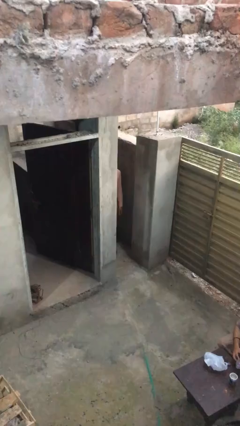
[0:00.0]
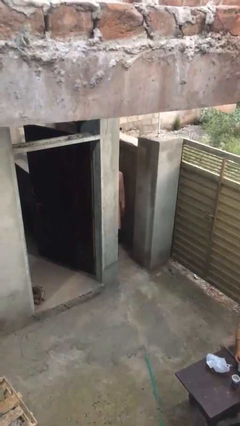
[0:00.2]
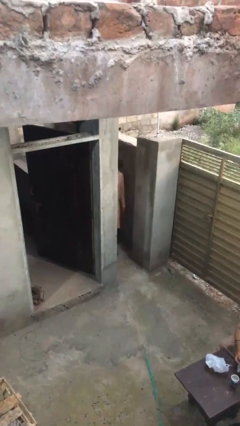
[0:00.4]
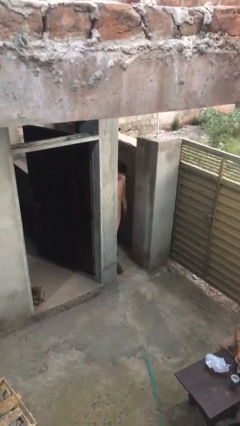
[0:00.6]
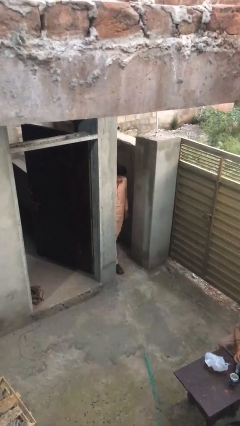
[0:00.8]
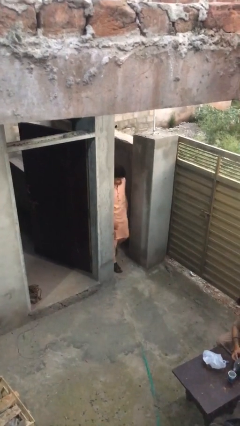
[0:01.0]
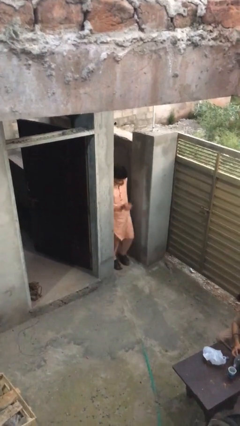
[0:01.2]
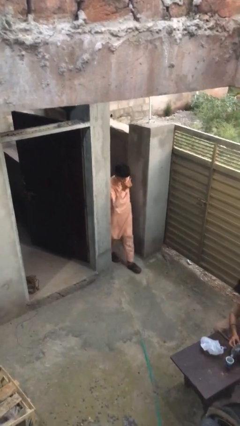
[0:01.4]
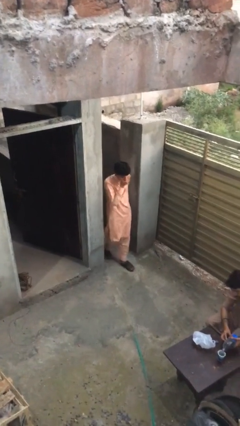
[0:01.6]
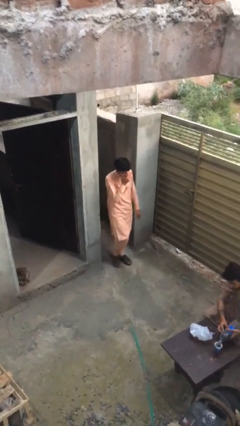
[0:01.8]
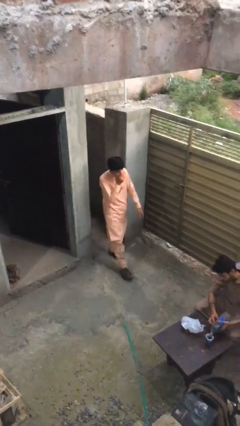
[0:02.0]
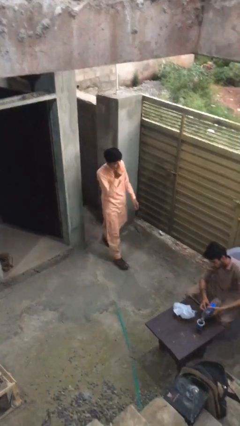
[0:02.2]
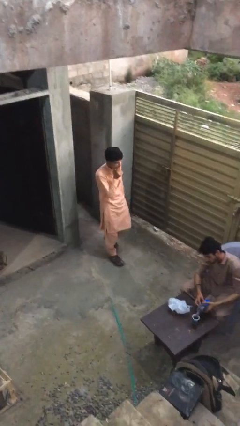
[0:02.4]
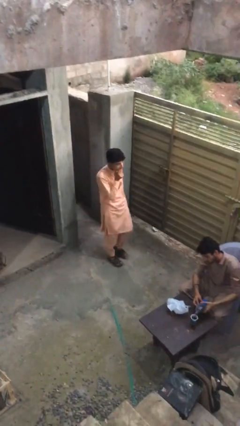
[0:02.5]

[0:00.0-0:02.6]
person enters scene through structure

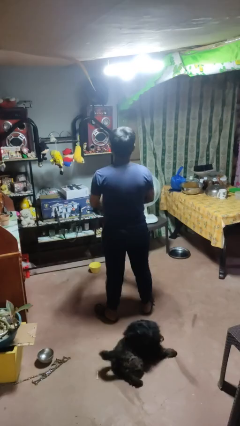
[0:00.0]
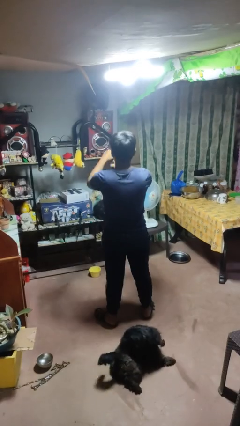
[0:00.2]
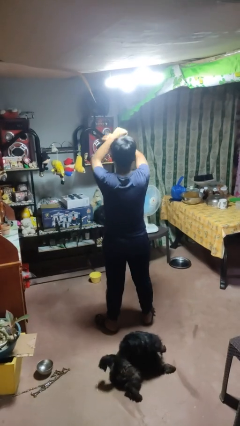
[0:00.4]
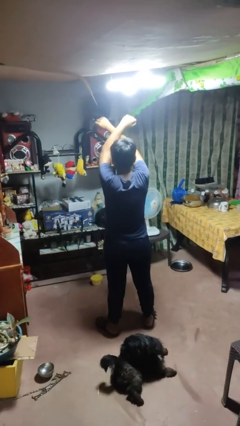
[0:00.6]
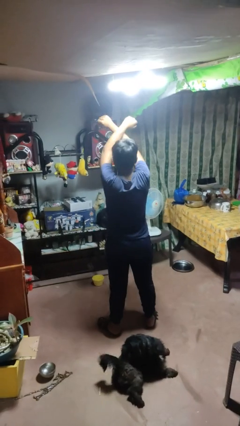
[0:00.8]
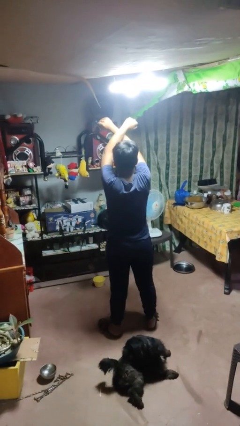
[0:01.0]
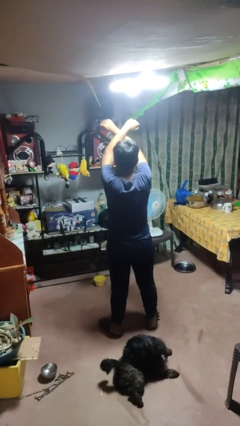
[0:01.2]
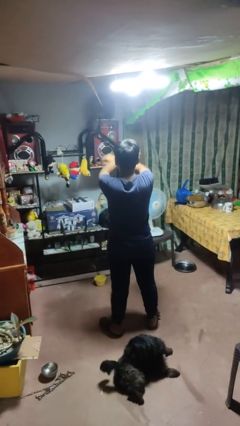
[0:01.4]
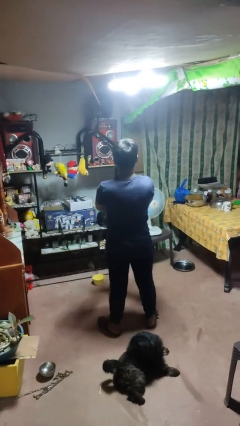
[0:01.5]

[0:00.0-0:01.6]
person gestures arms x

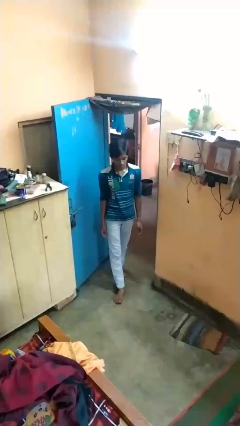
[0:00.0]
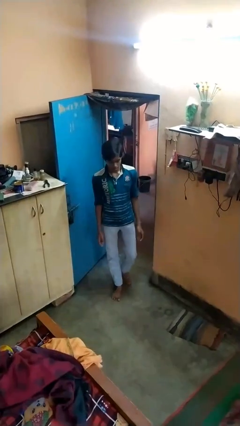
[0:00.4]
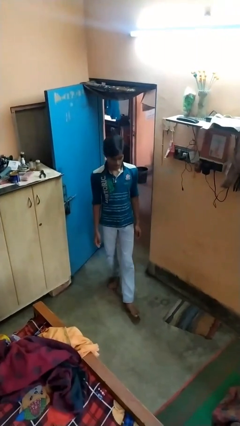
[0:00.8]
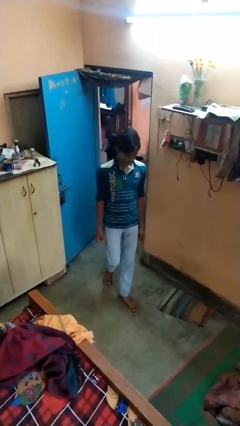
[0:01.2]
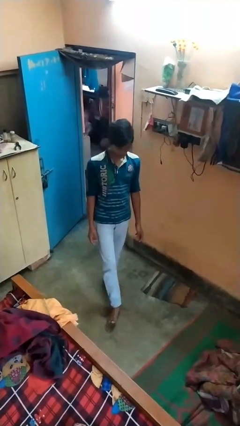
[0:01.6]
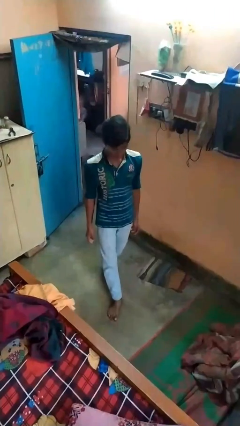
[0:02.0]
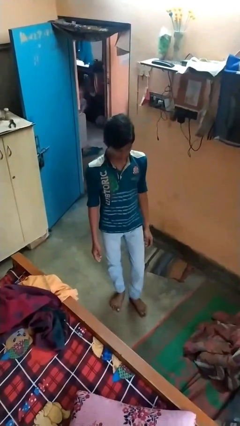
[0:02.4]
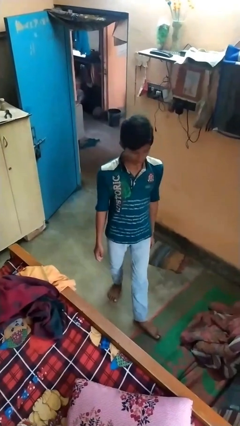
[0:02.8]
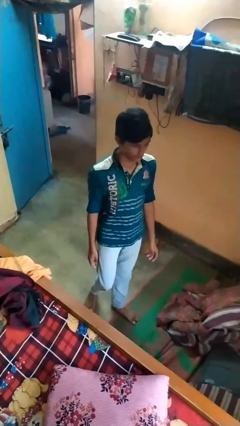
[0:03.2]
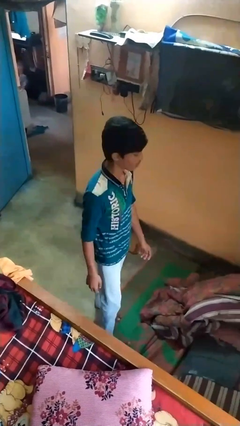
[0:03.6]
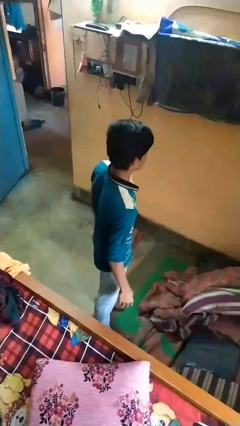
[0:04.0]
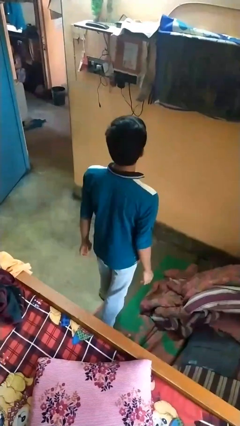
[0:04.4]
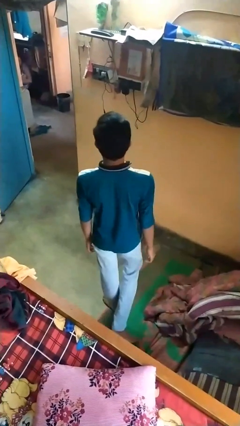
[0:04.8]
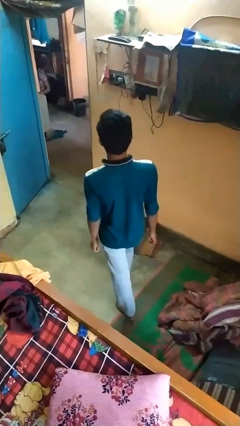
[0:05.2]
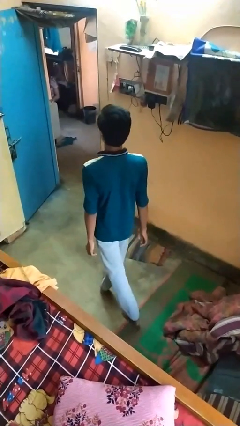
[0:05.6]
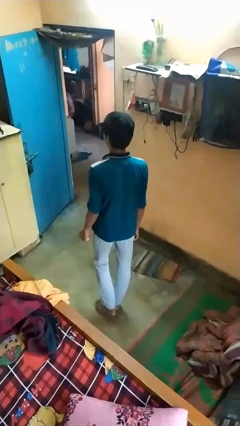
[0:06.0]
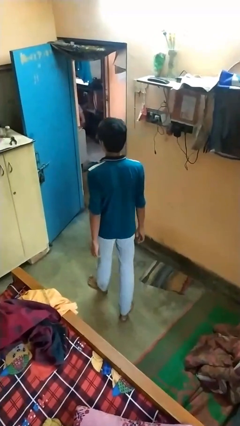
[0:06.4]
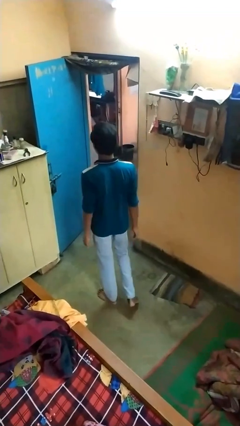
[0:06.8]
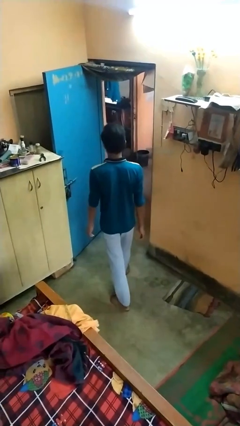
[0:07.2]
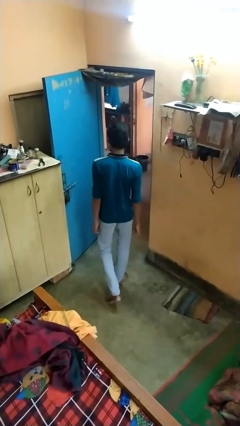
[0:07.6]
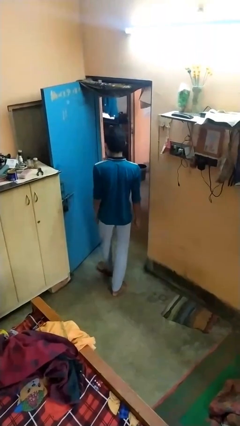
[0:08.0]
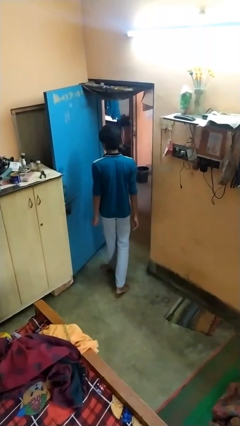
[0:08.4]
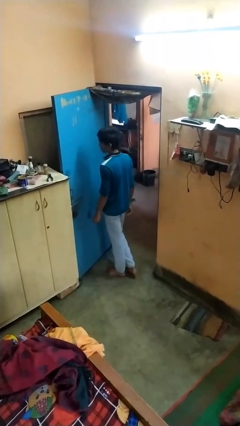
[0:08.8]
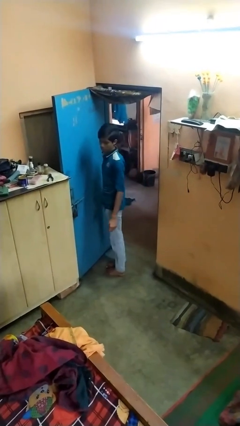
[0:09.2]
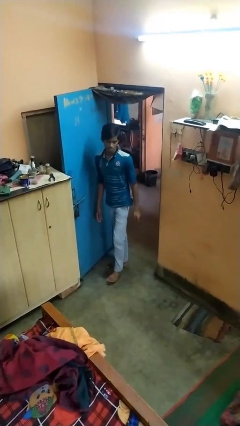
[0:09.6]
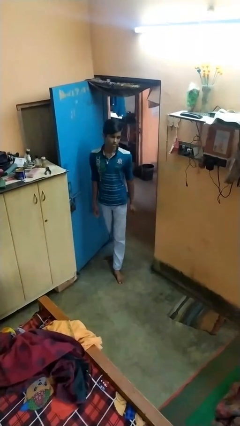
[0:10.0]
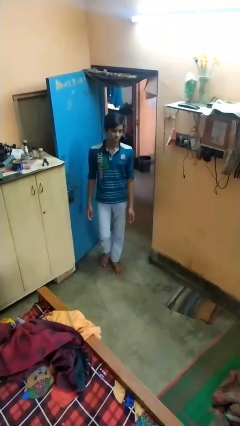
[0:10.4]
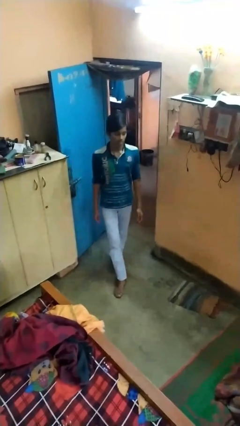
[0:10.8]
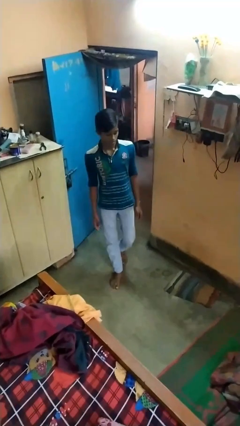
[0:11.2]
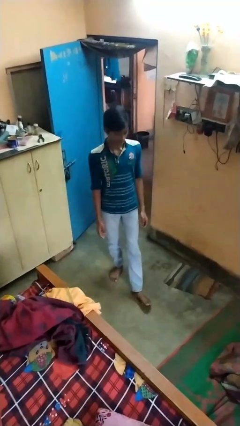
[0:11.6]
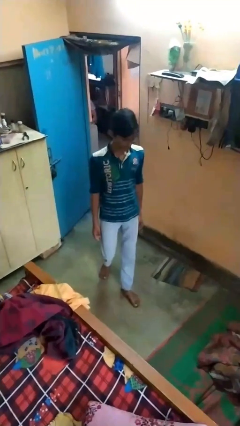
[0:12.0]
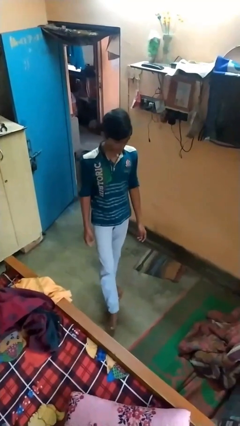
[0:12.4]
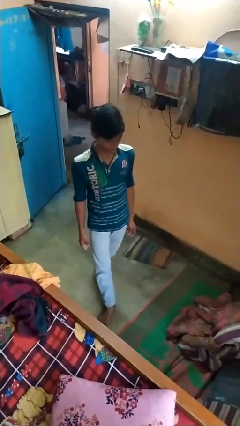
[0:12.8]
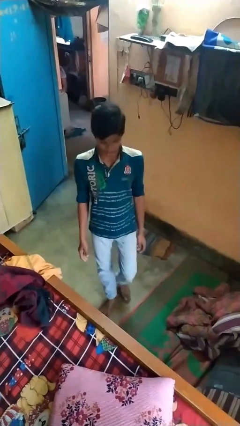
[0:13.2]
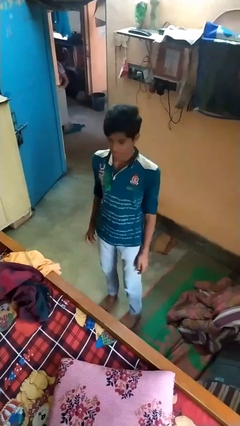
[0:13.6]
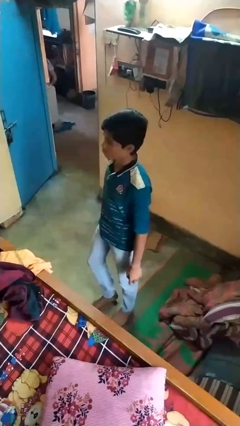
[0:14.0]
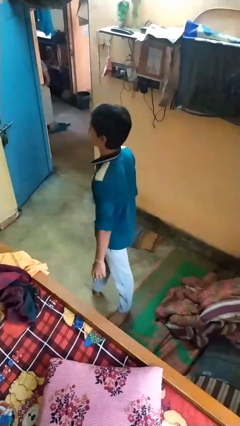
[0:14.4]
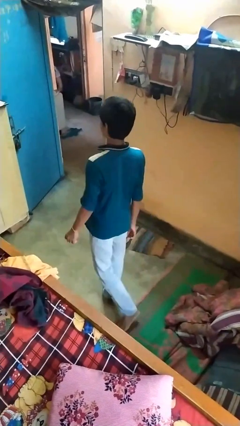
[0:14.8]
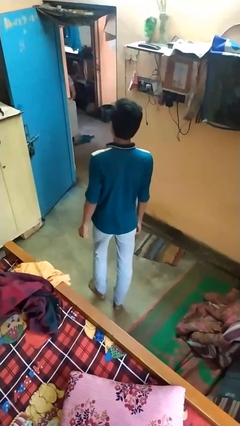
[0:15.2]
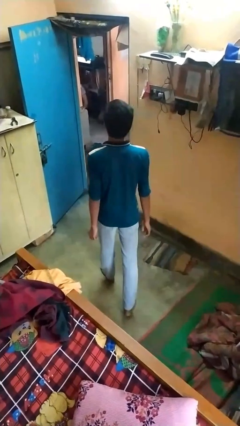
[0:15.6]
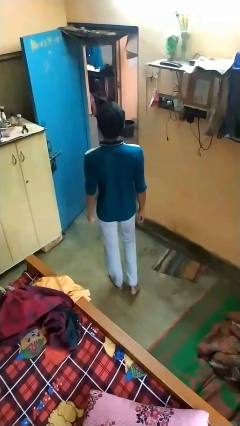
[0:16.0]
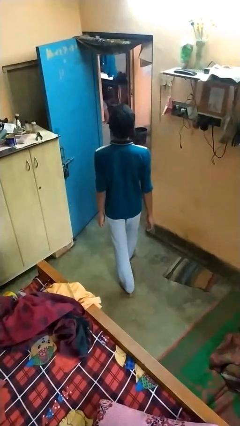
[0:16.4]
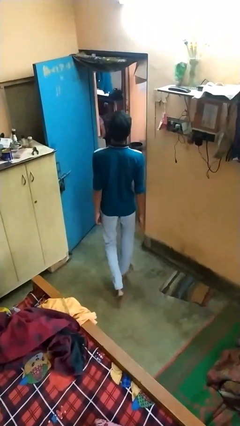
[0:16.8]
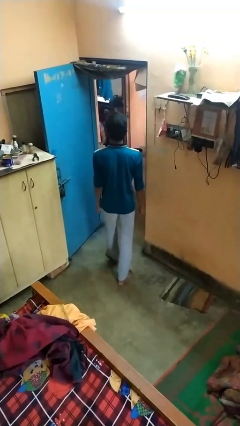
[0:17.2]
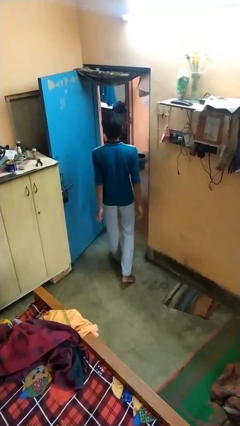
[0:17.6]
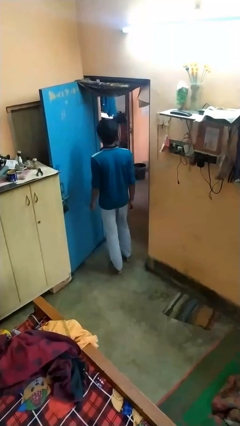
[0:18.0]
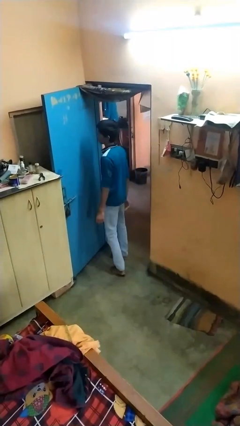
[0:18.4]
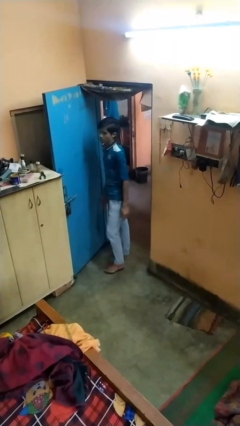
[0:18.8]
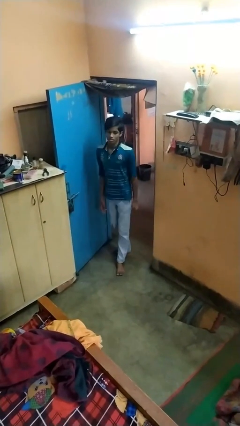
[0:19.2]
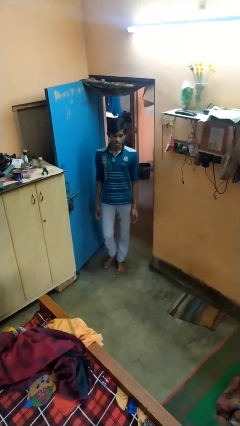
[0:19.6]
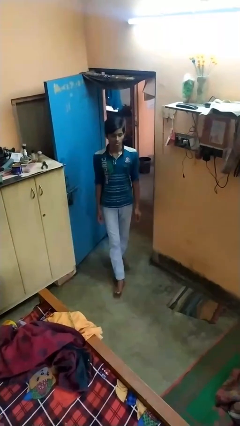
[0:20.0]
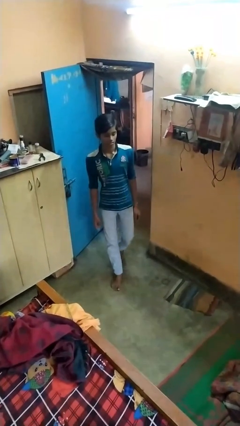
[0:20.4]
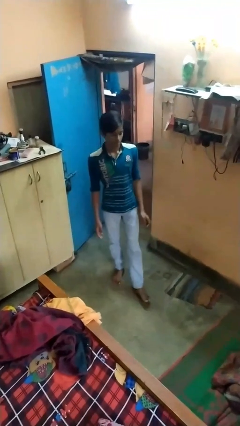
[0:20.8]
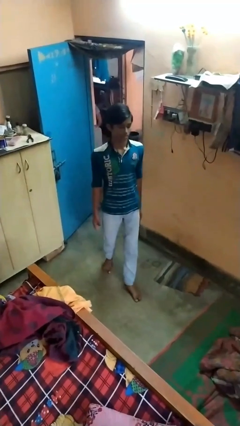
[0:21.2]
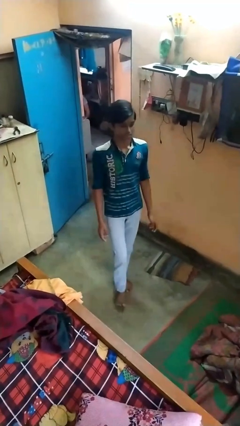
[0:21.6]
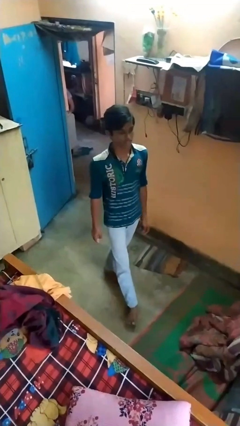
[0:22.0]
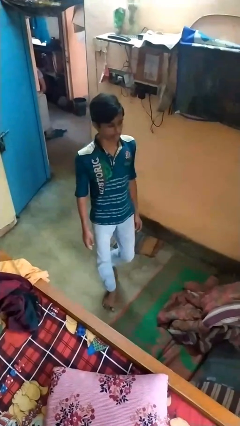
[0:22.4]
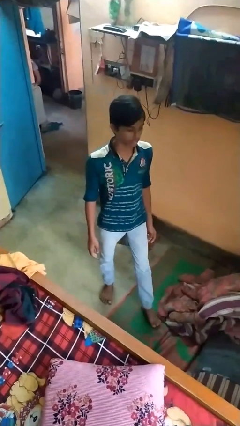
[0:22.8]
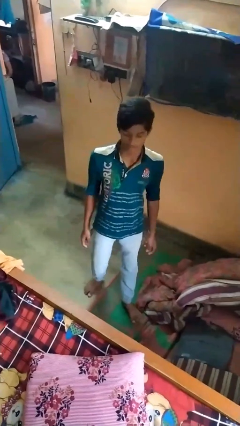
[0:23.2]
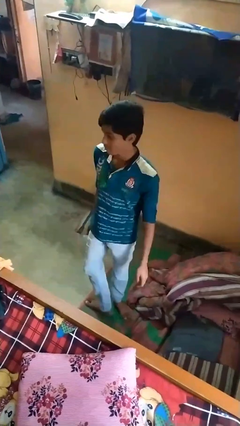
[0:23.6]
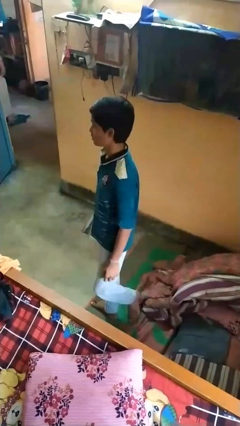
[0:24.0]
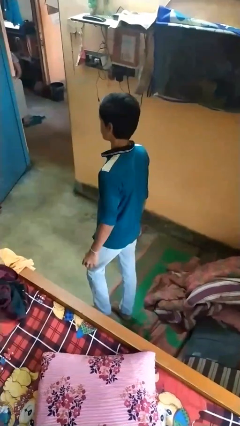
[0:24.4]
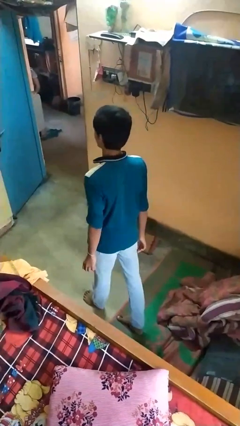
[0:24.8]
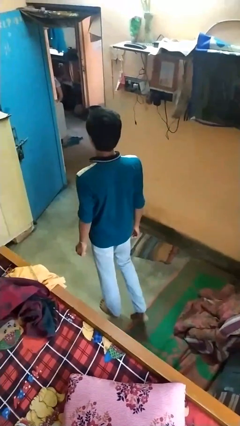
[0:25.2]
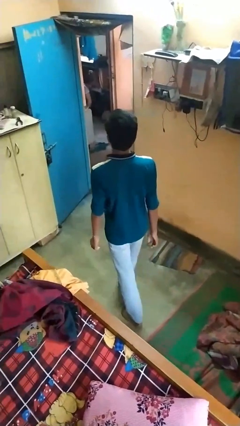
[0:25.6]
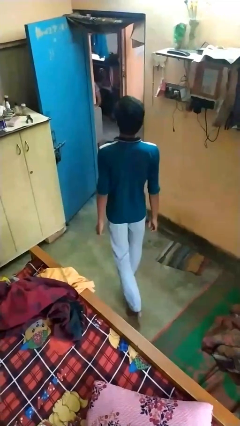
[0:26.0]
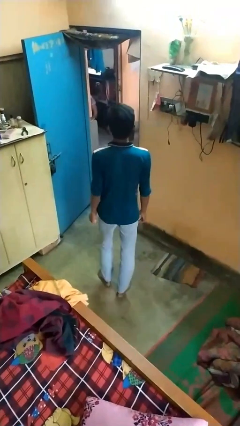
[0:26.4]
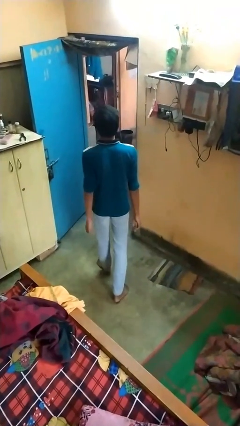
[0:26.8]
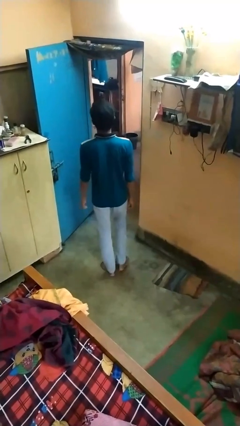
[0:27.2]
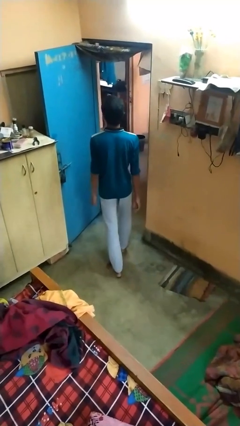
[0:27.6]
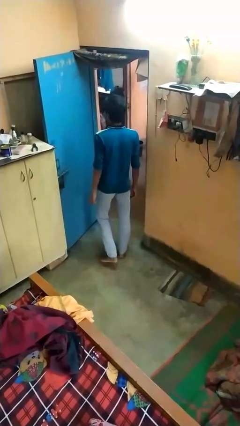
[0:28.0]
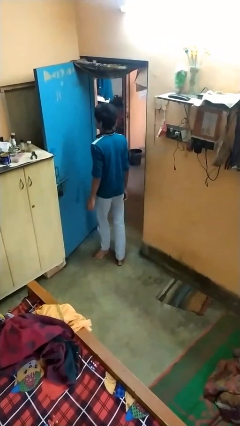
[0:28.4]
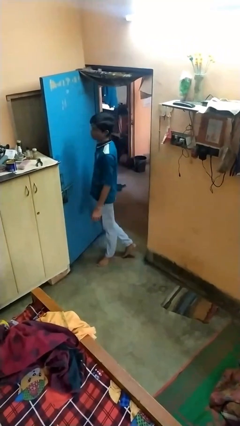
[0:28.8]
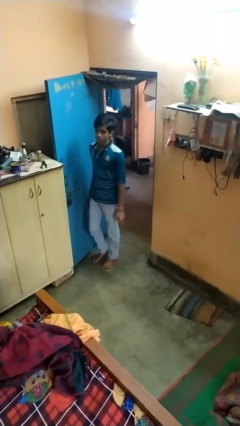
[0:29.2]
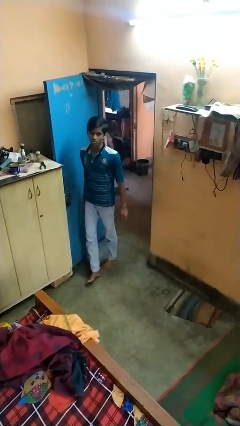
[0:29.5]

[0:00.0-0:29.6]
person walks
